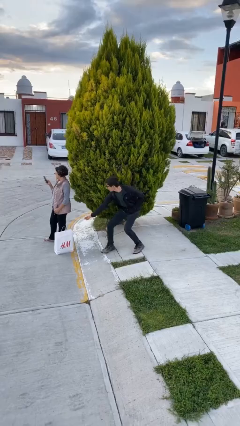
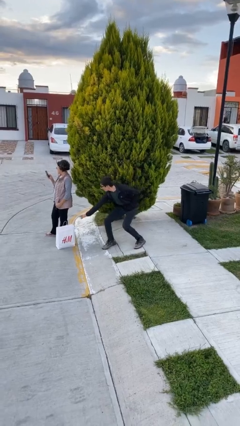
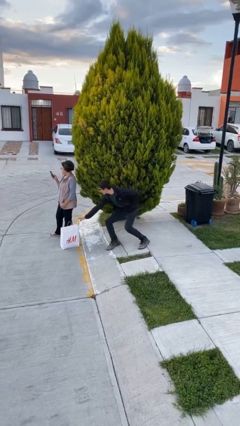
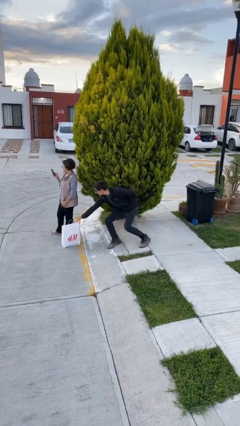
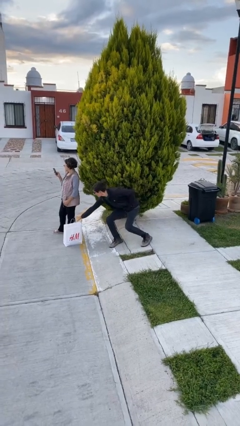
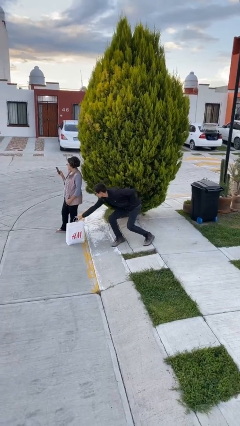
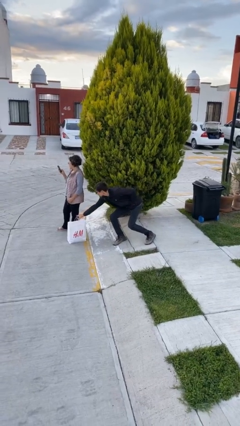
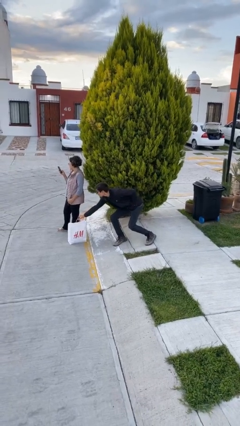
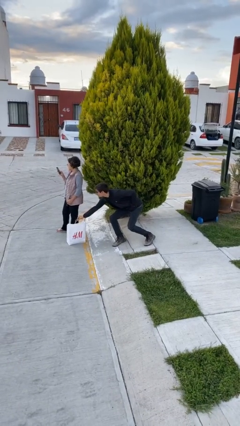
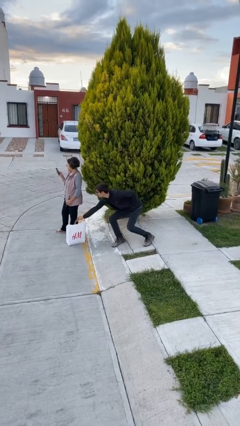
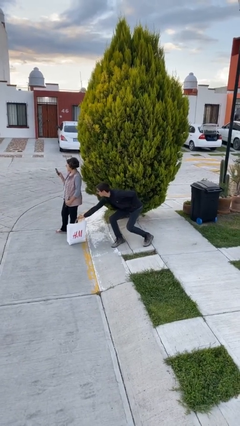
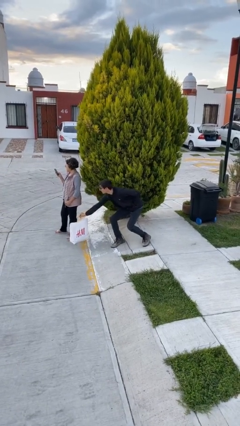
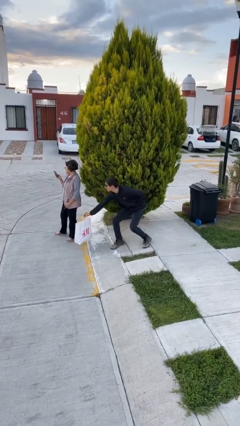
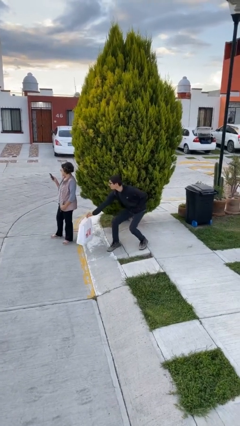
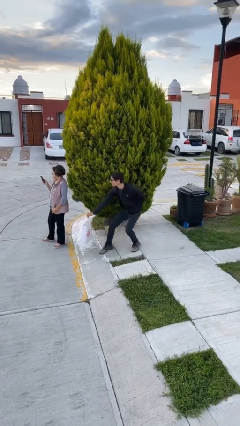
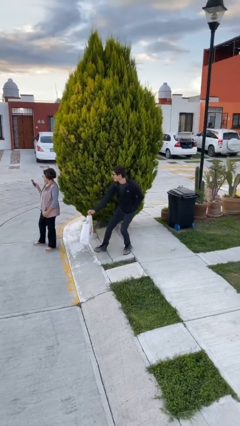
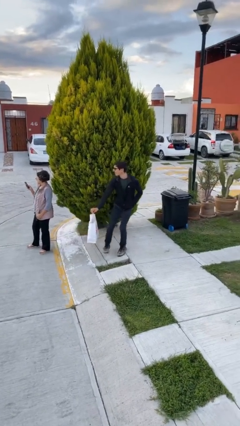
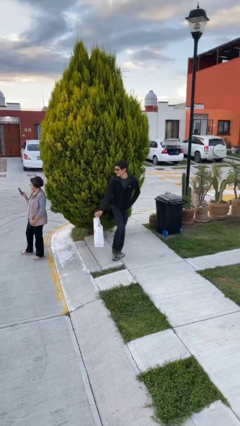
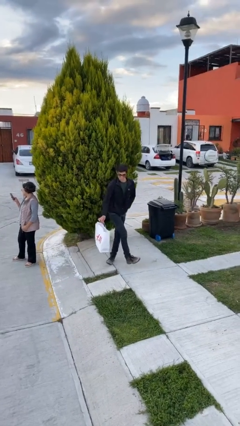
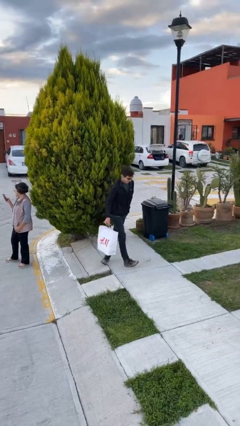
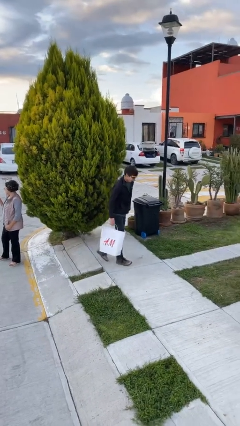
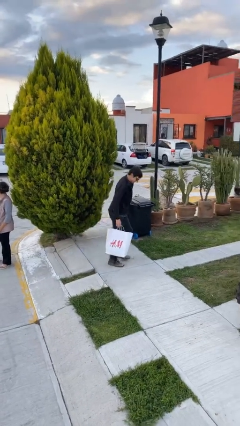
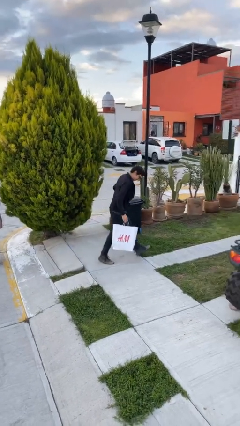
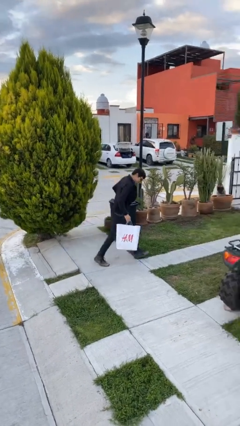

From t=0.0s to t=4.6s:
person steals object from person

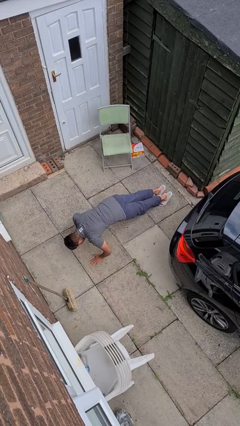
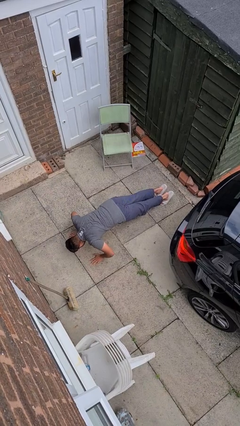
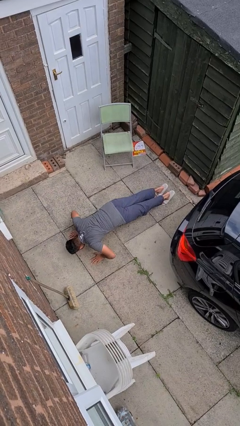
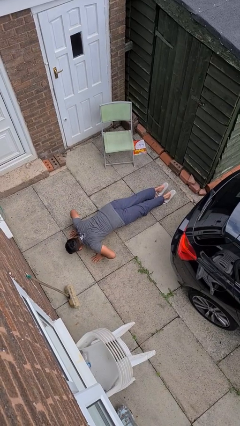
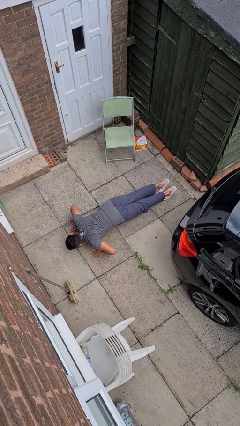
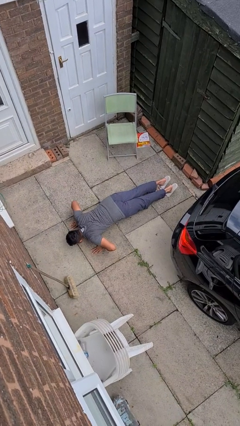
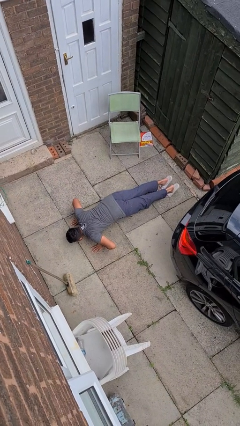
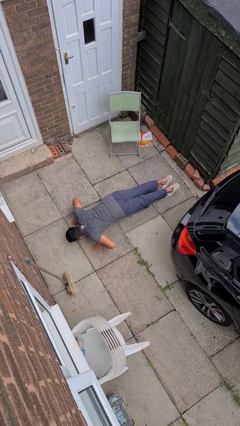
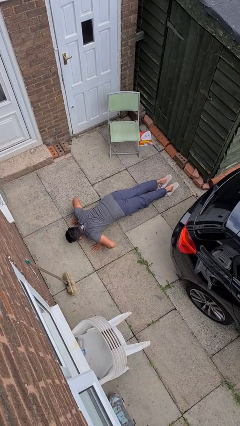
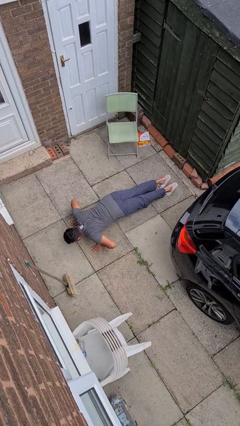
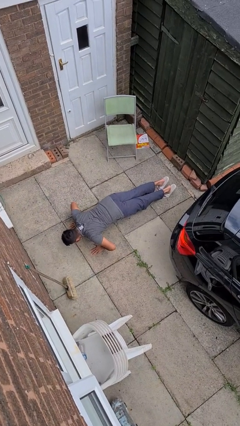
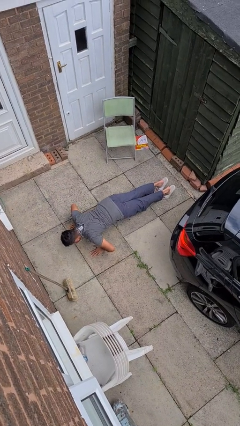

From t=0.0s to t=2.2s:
person exercises with pushup

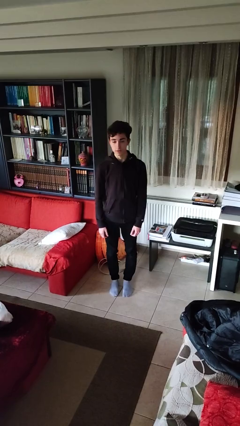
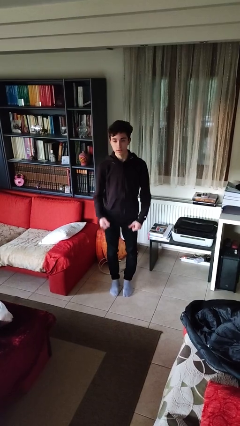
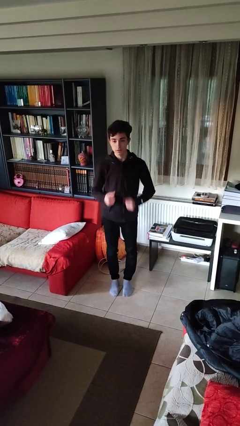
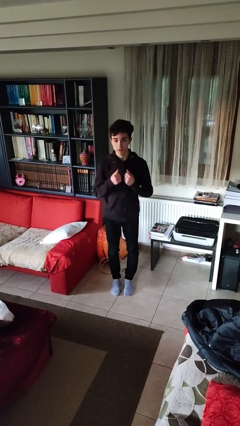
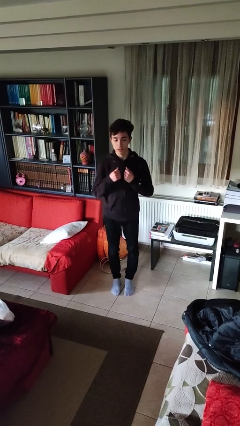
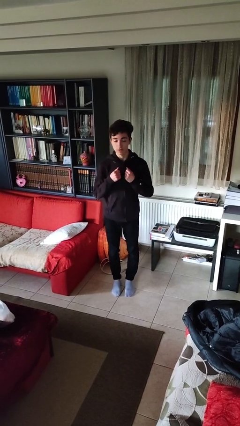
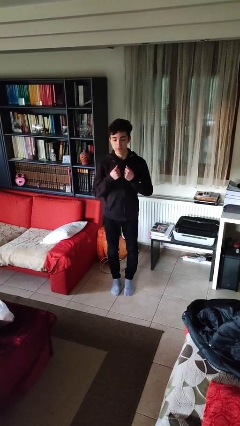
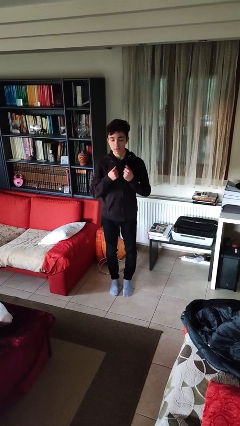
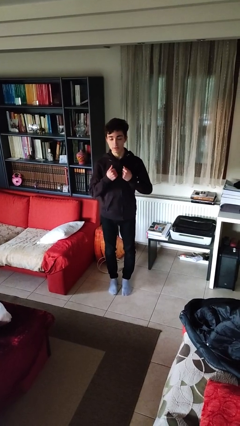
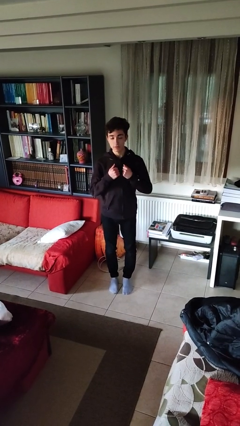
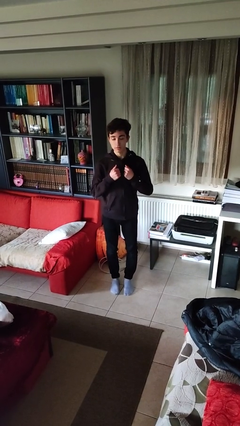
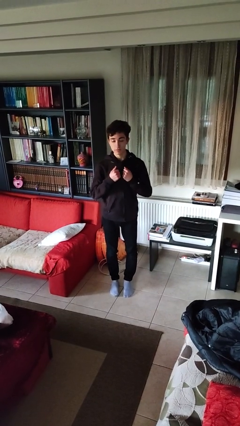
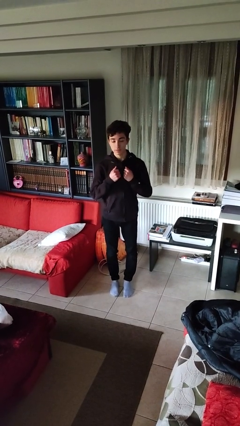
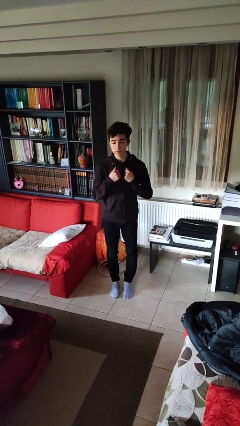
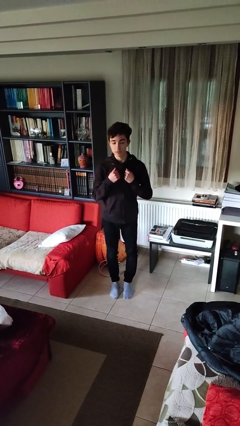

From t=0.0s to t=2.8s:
person drums on chest

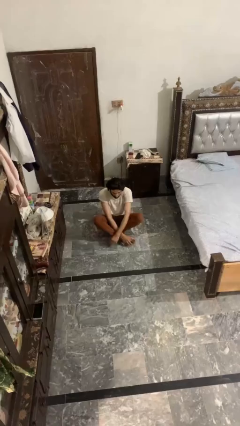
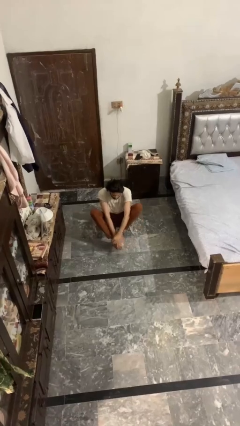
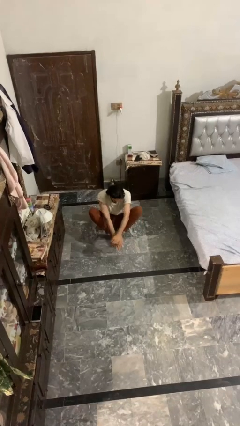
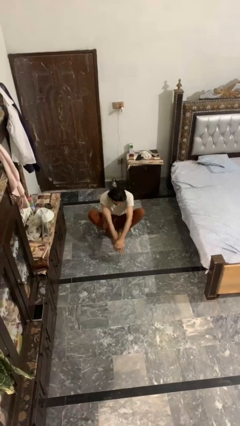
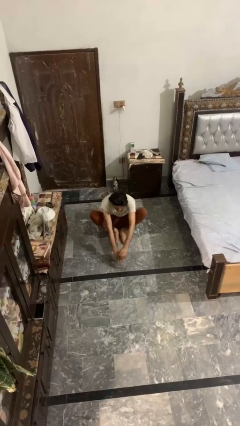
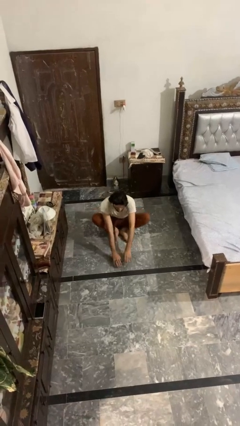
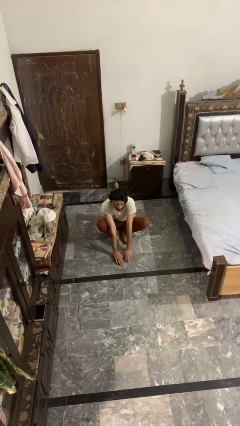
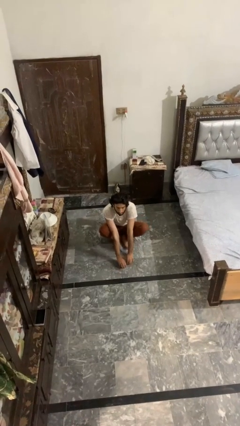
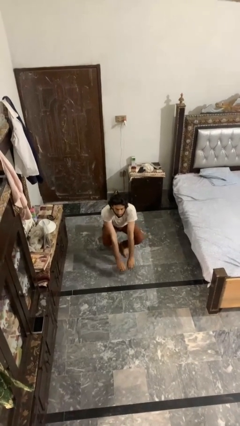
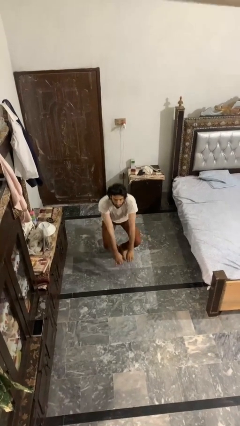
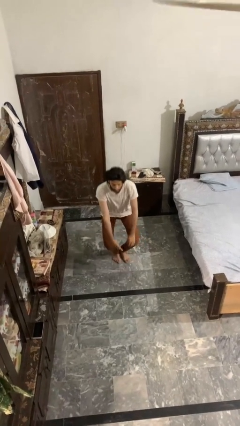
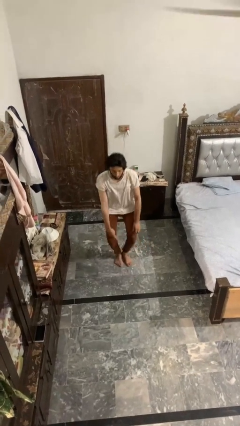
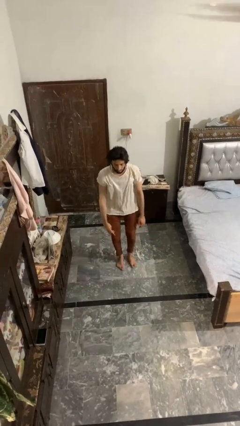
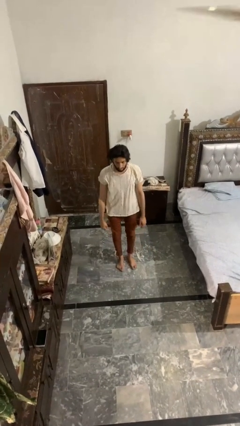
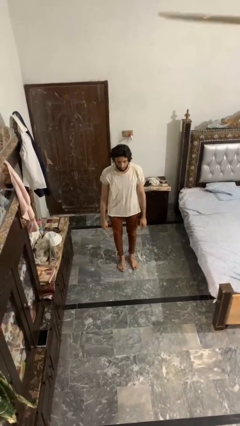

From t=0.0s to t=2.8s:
person stands up from floor

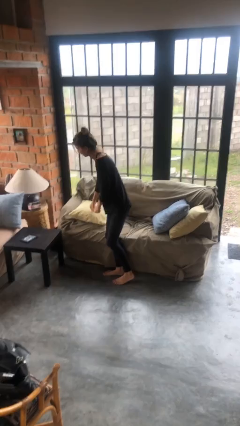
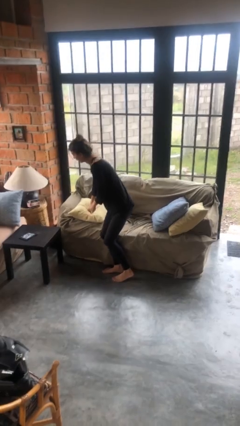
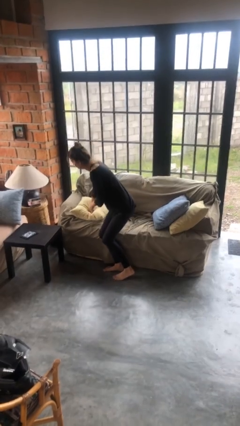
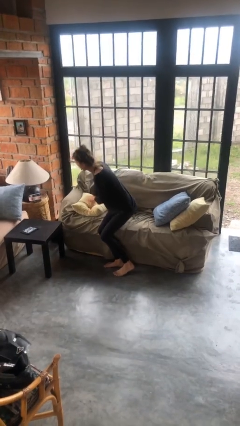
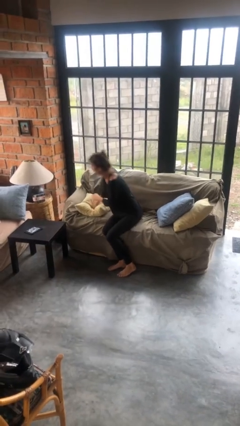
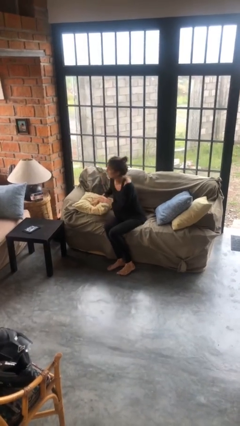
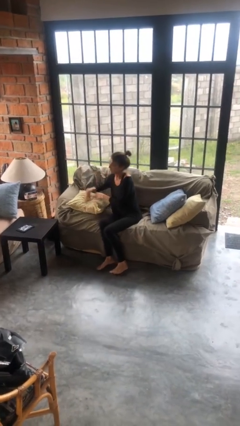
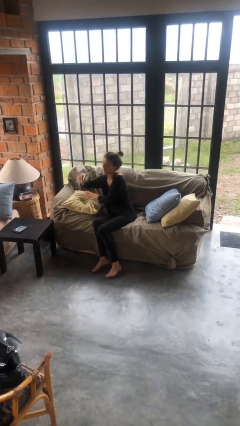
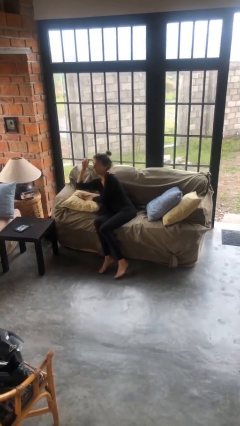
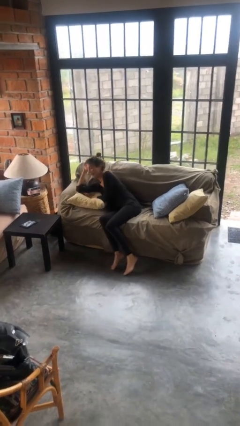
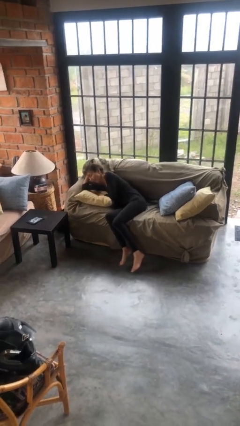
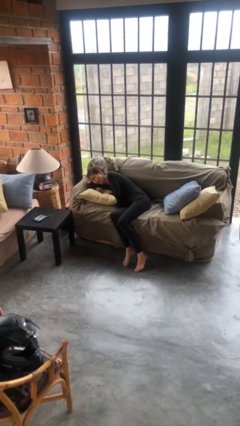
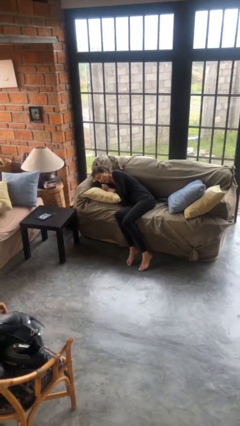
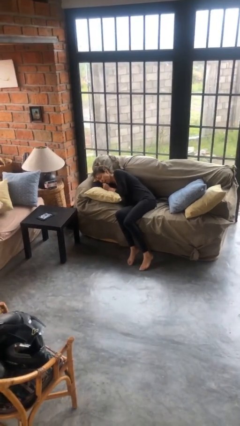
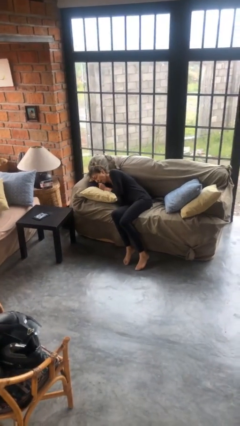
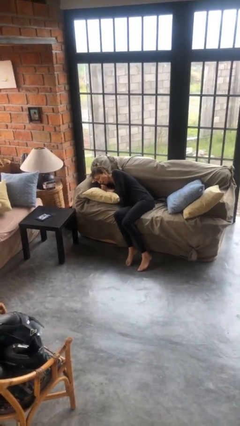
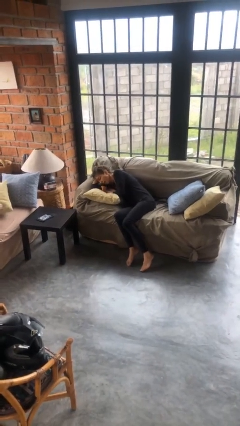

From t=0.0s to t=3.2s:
person lies down on couch

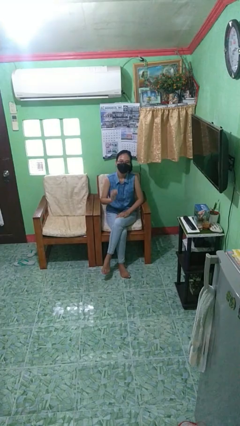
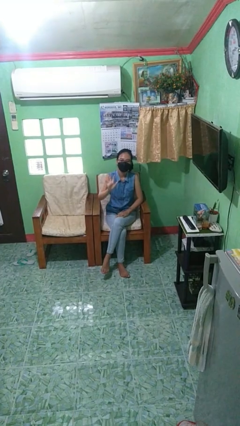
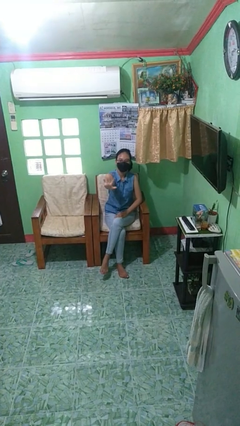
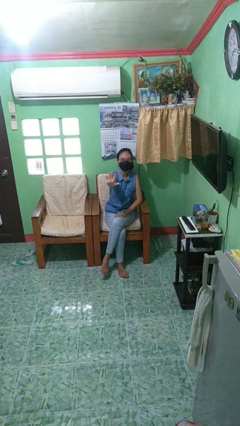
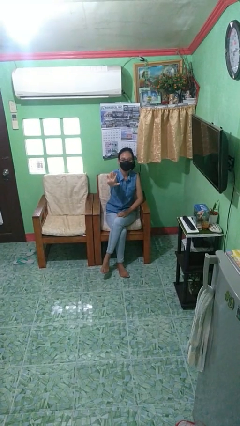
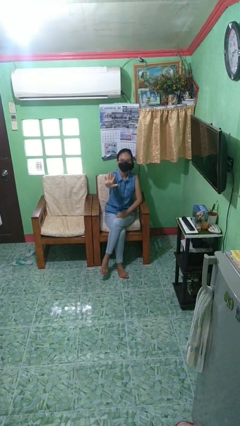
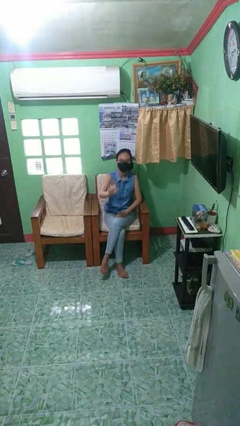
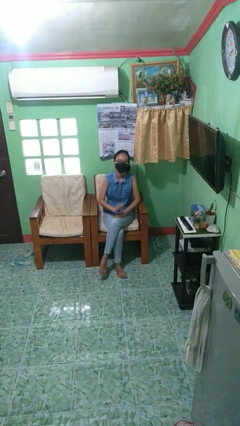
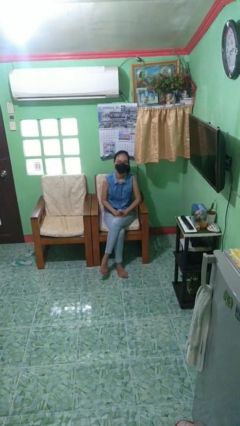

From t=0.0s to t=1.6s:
person gestures stop
